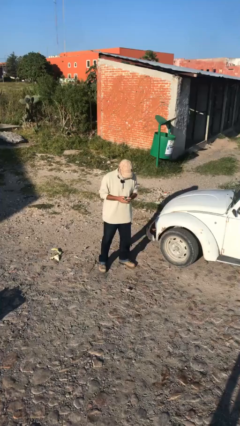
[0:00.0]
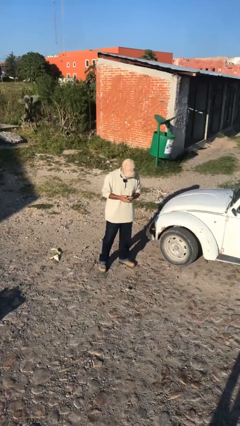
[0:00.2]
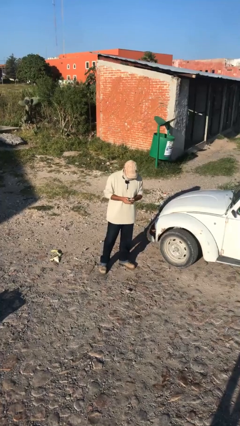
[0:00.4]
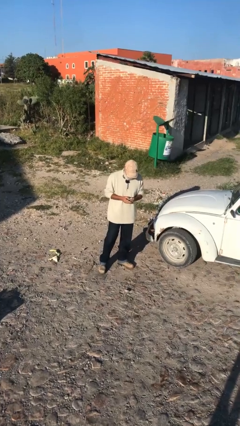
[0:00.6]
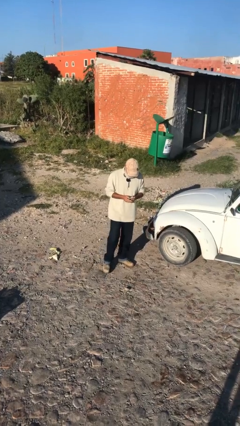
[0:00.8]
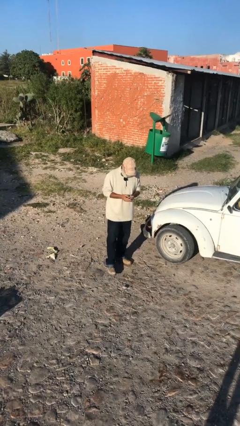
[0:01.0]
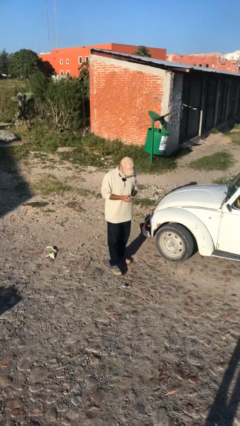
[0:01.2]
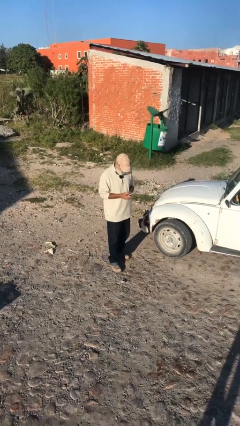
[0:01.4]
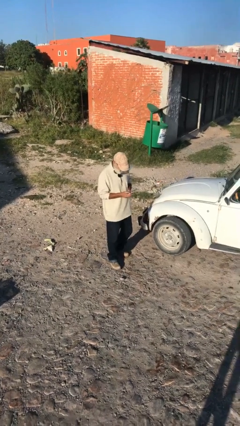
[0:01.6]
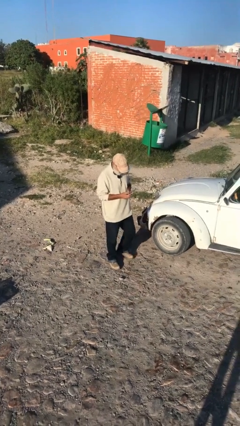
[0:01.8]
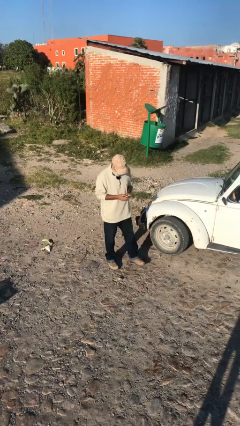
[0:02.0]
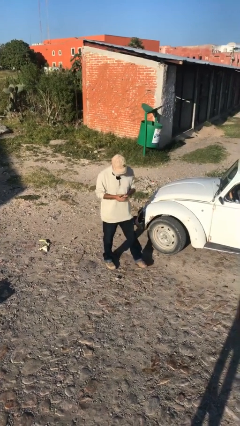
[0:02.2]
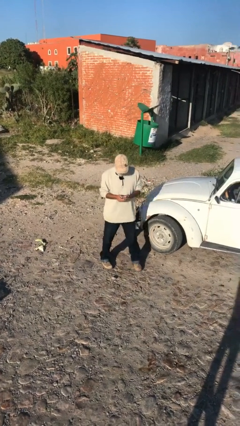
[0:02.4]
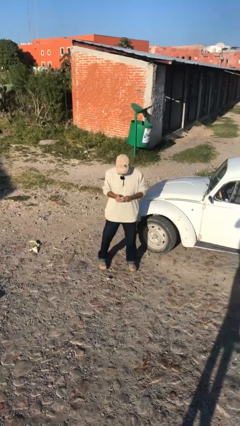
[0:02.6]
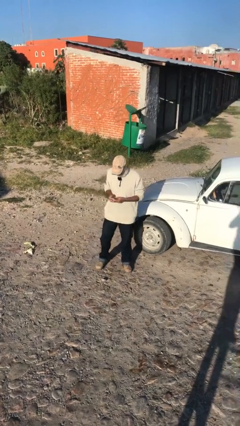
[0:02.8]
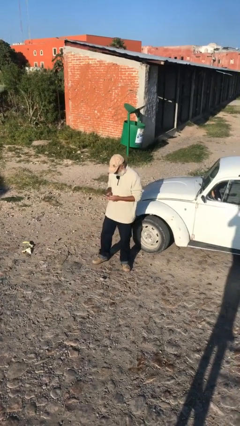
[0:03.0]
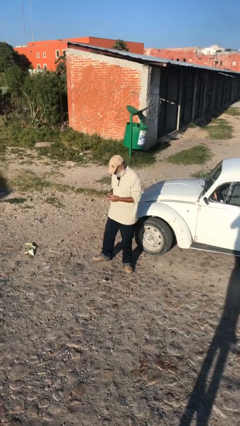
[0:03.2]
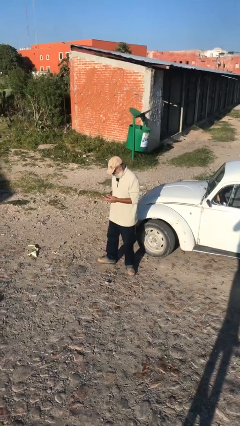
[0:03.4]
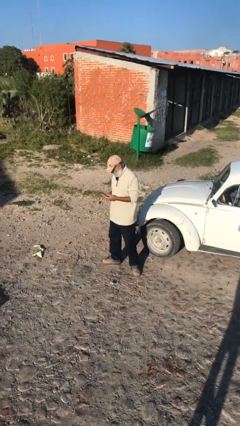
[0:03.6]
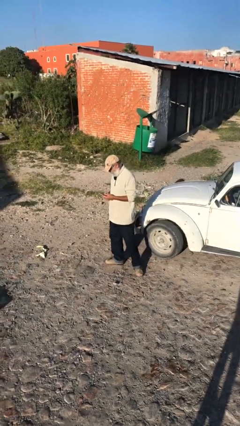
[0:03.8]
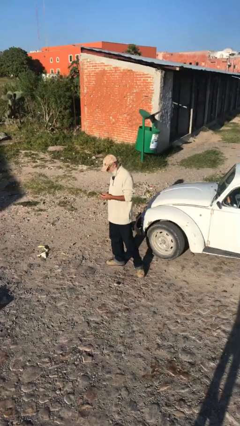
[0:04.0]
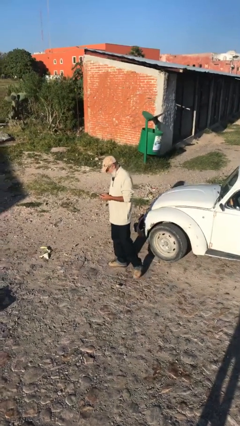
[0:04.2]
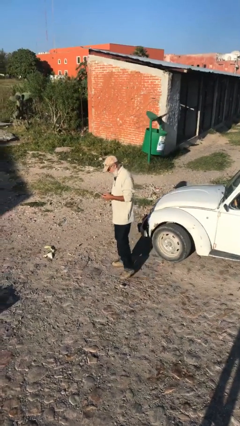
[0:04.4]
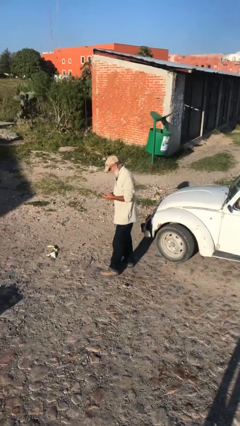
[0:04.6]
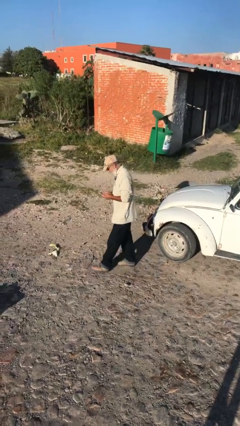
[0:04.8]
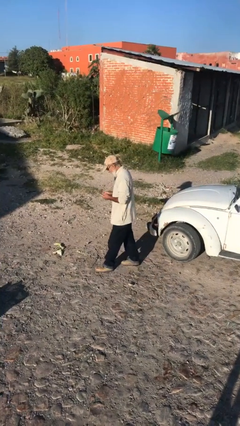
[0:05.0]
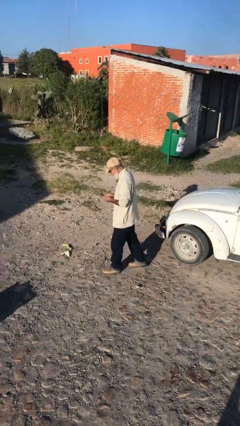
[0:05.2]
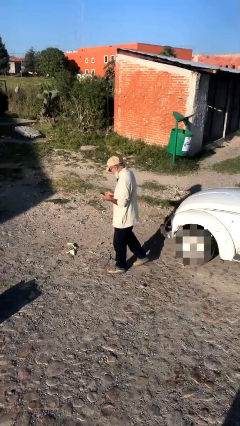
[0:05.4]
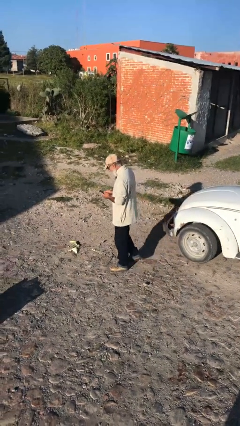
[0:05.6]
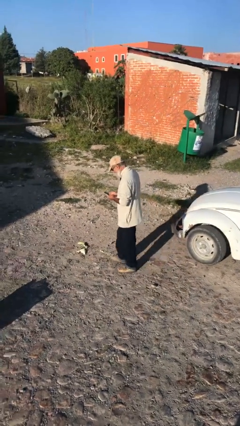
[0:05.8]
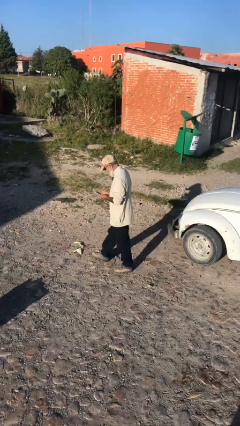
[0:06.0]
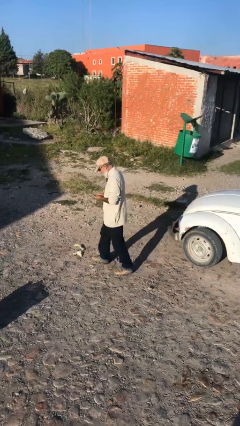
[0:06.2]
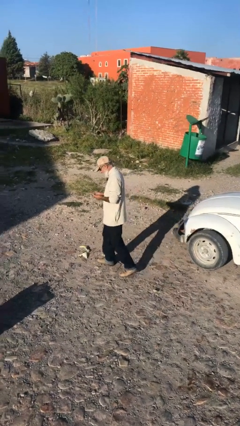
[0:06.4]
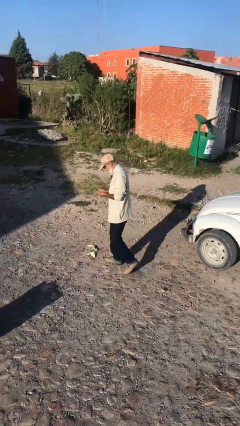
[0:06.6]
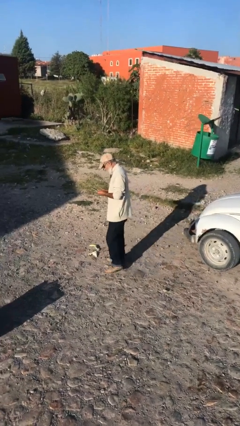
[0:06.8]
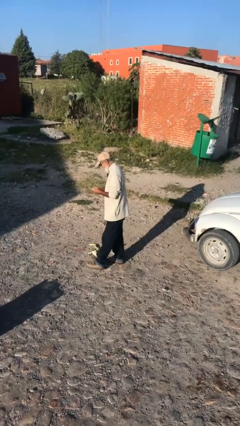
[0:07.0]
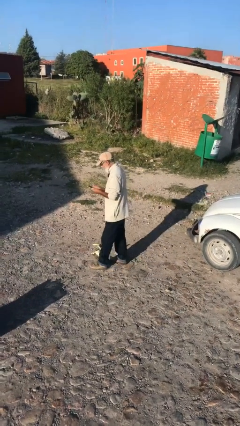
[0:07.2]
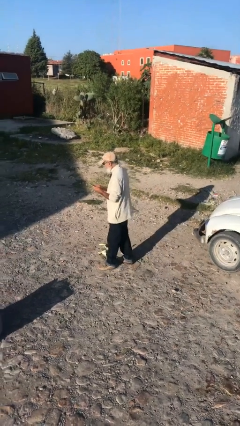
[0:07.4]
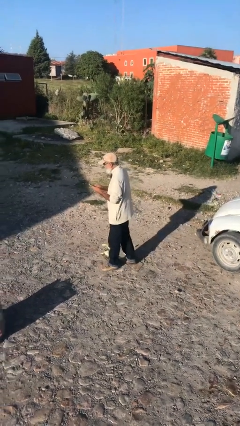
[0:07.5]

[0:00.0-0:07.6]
person texts on phone

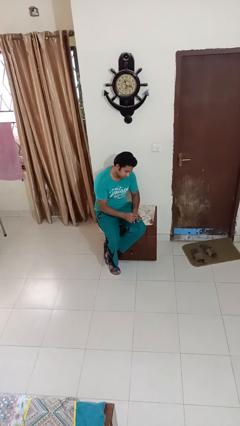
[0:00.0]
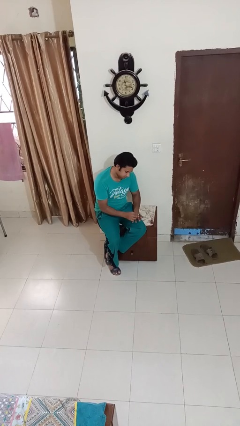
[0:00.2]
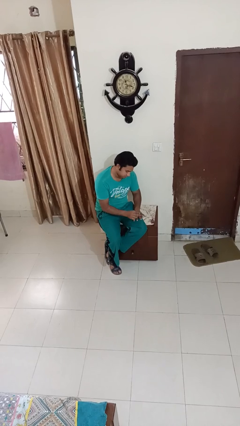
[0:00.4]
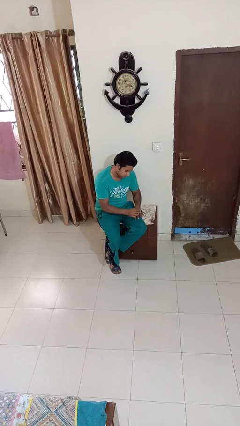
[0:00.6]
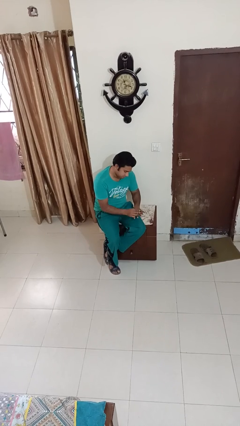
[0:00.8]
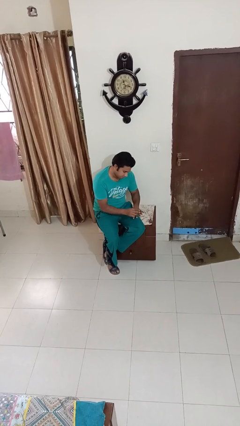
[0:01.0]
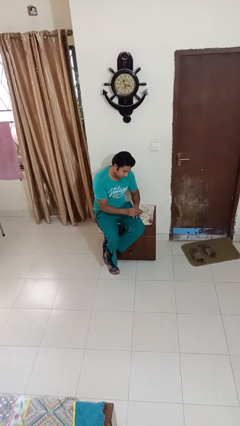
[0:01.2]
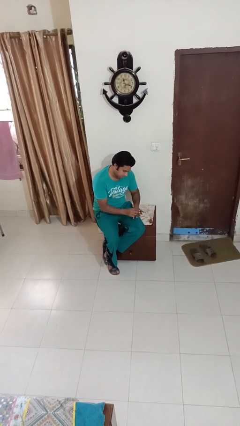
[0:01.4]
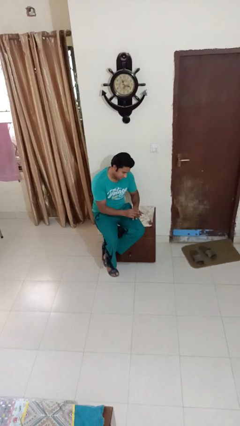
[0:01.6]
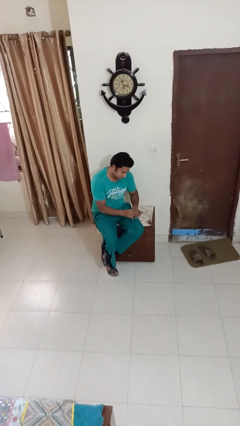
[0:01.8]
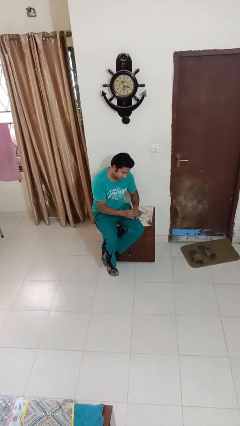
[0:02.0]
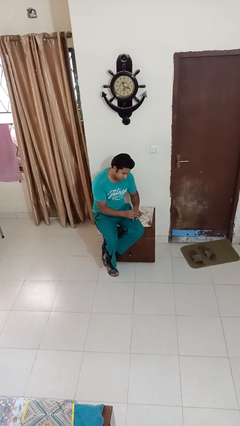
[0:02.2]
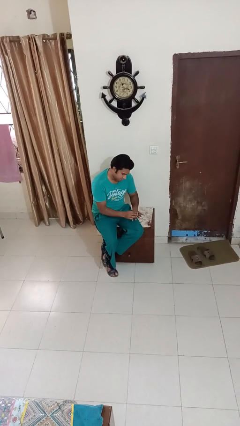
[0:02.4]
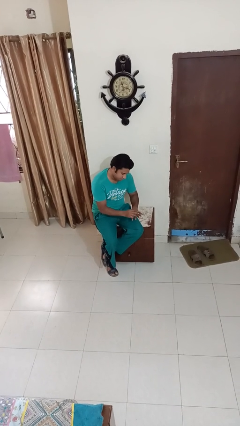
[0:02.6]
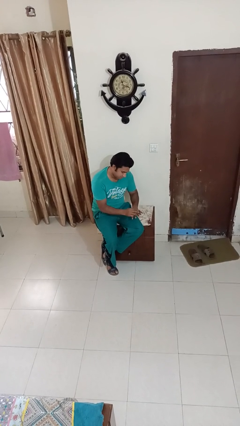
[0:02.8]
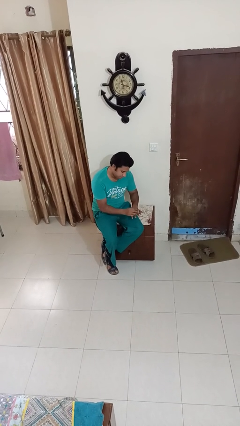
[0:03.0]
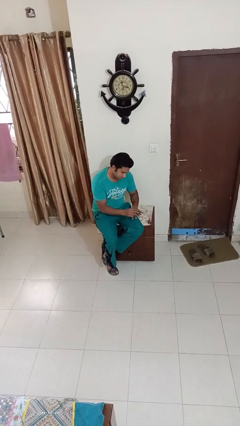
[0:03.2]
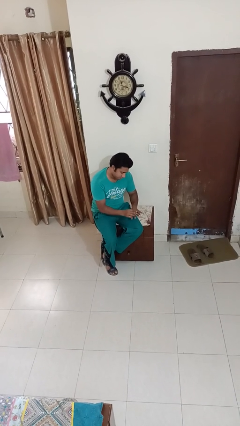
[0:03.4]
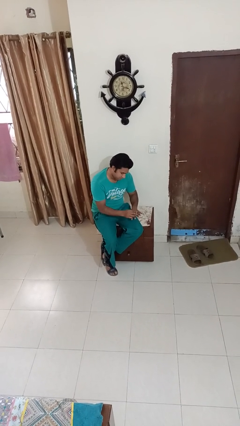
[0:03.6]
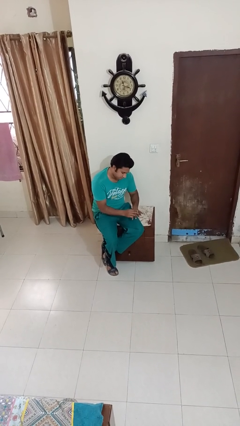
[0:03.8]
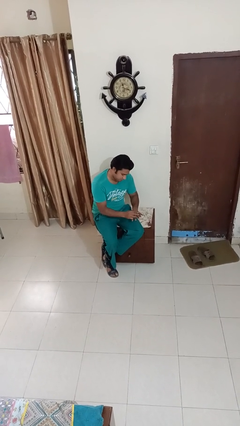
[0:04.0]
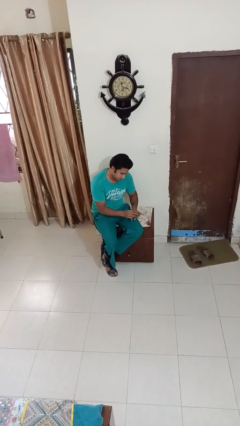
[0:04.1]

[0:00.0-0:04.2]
person paints fingernails

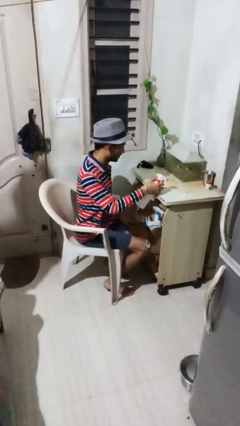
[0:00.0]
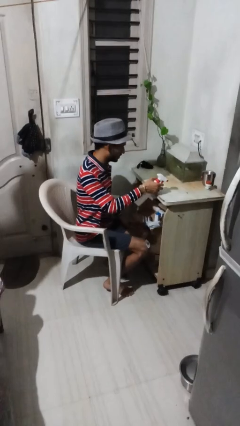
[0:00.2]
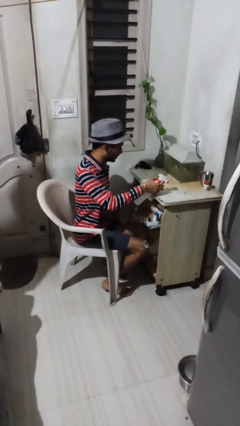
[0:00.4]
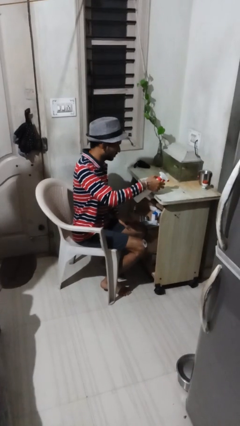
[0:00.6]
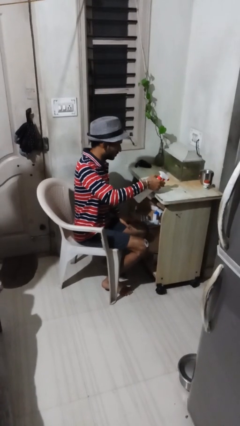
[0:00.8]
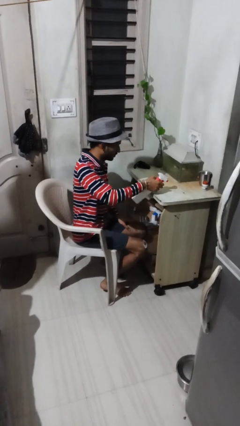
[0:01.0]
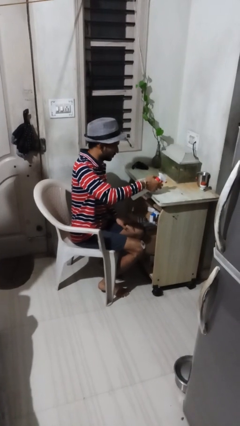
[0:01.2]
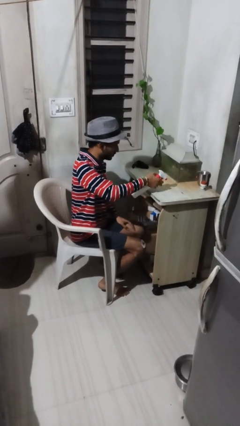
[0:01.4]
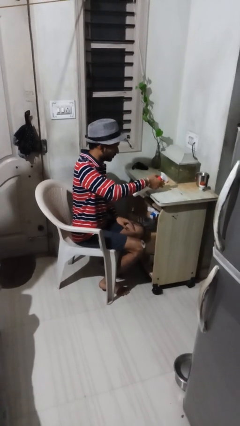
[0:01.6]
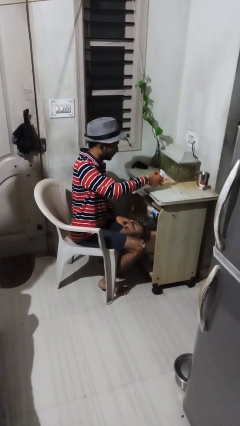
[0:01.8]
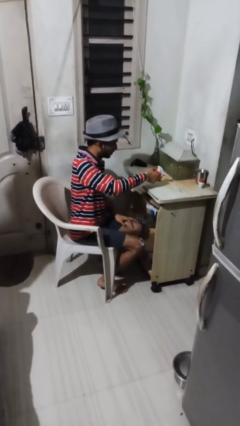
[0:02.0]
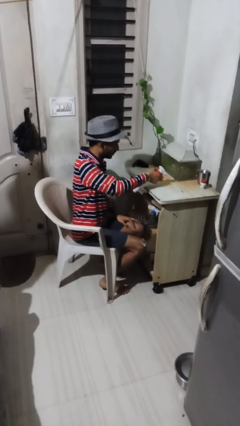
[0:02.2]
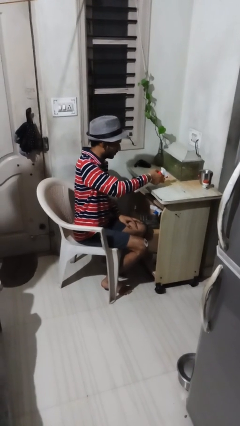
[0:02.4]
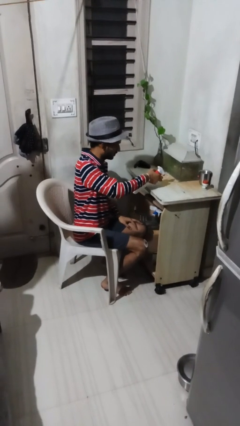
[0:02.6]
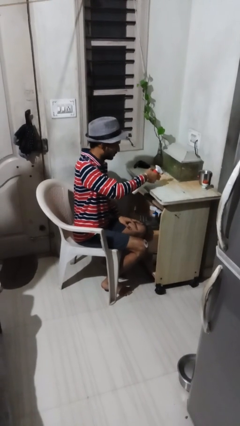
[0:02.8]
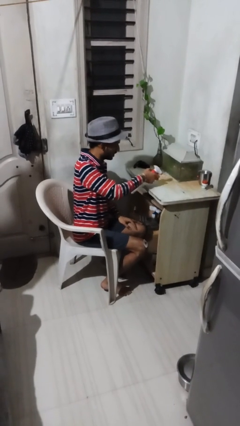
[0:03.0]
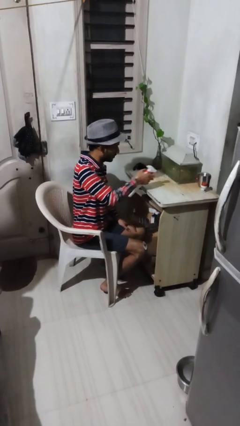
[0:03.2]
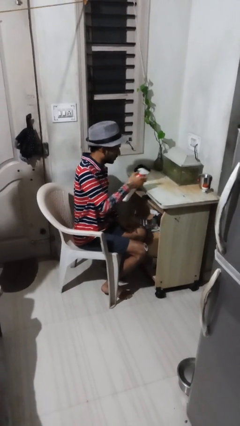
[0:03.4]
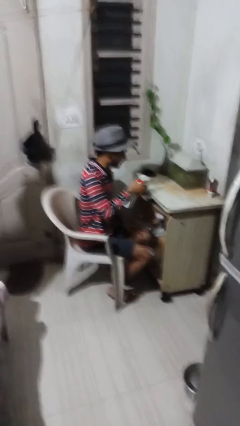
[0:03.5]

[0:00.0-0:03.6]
person sprays from bottle

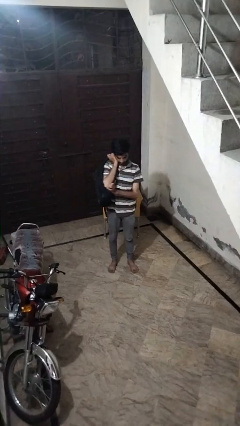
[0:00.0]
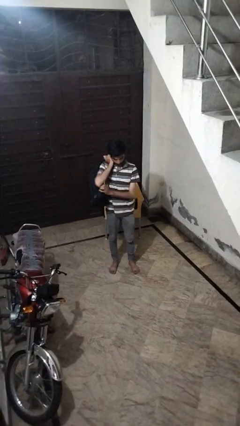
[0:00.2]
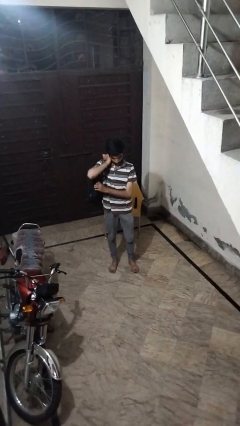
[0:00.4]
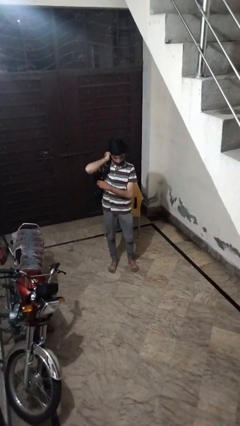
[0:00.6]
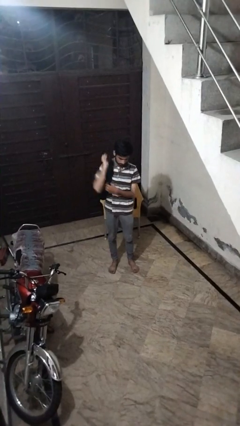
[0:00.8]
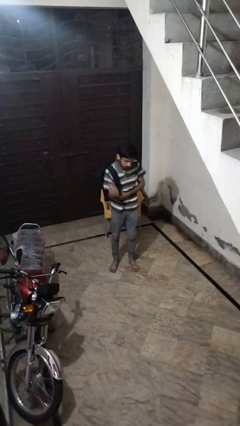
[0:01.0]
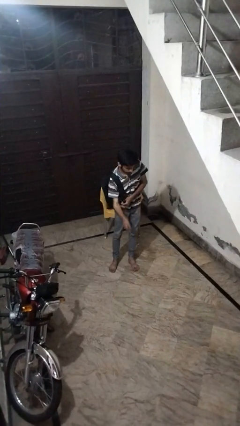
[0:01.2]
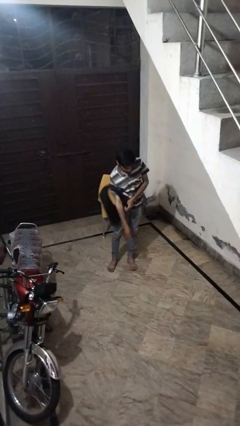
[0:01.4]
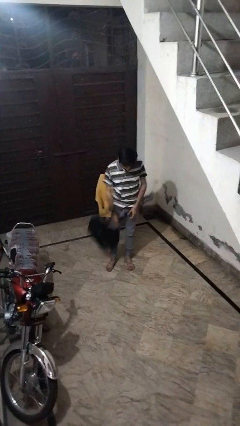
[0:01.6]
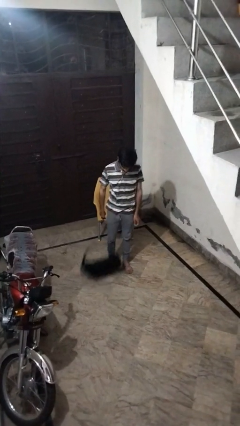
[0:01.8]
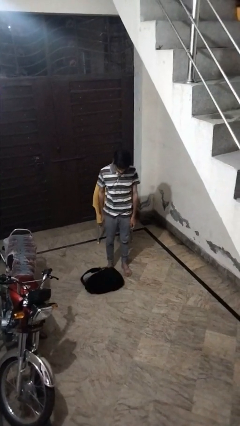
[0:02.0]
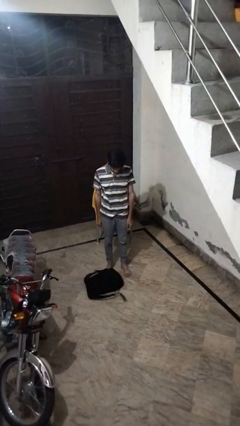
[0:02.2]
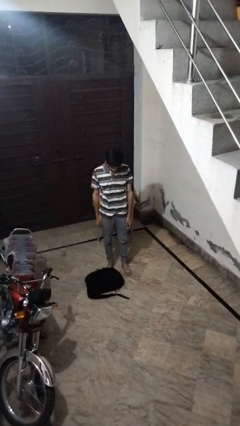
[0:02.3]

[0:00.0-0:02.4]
person drops object

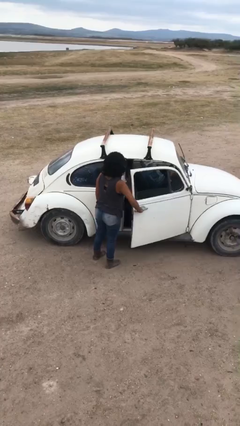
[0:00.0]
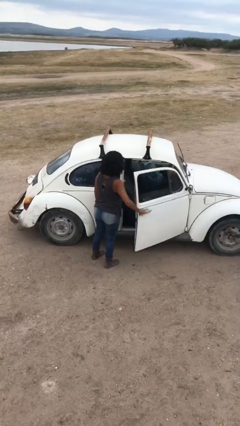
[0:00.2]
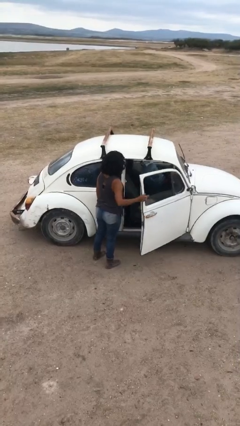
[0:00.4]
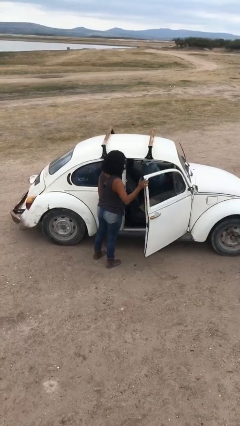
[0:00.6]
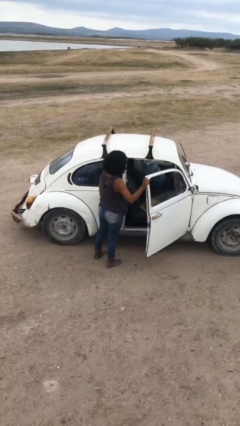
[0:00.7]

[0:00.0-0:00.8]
person unloads car
